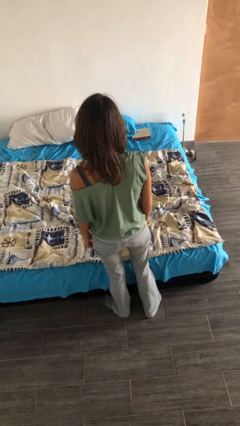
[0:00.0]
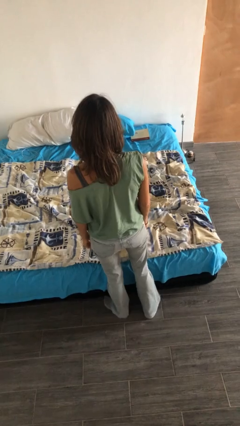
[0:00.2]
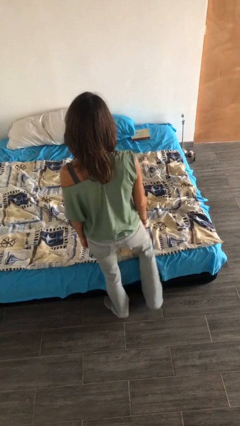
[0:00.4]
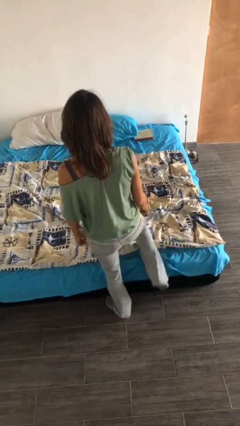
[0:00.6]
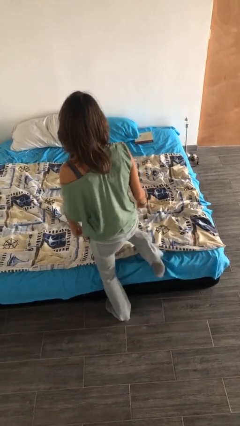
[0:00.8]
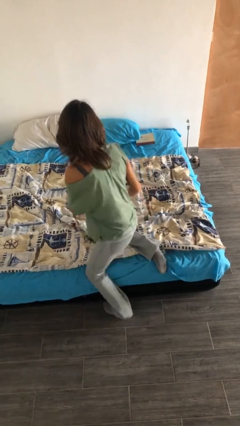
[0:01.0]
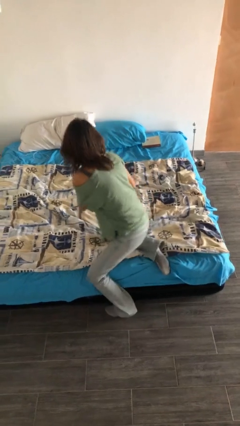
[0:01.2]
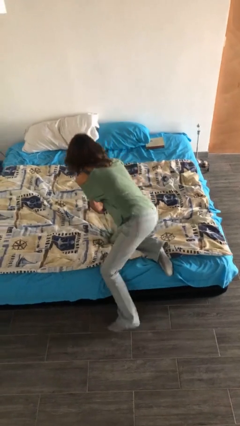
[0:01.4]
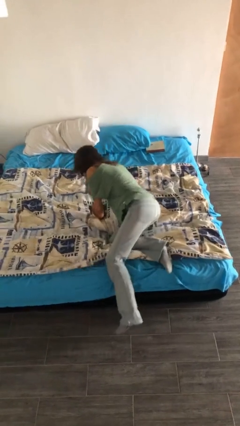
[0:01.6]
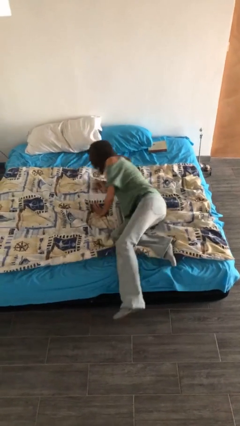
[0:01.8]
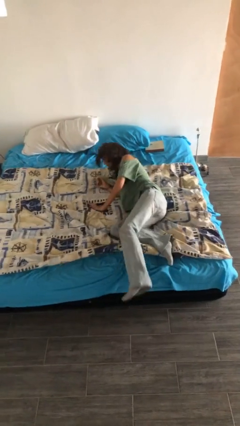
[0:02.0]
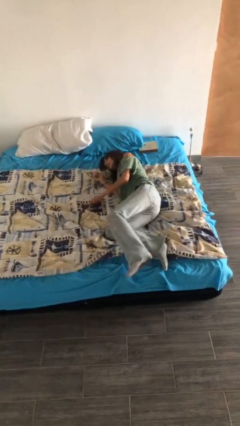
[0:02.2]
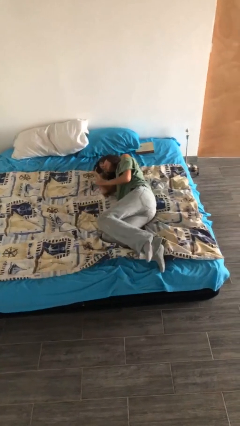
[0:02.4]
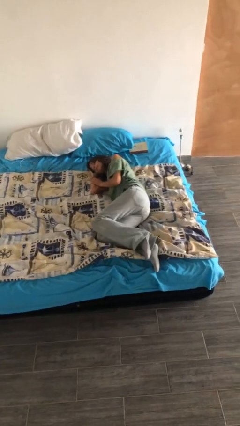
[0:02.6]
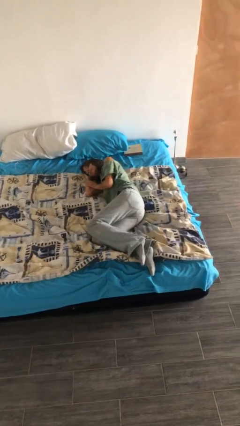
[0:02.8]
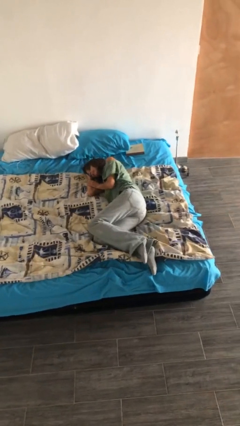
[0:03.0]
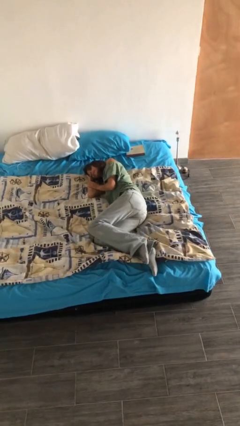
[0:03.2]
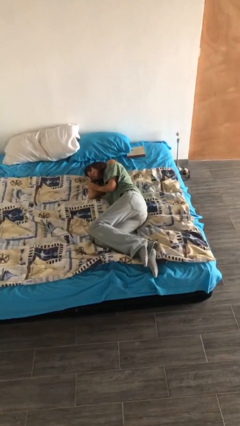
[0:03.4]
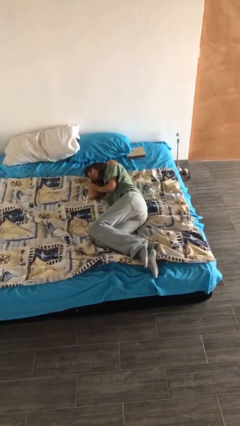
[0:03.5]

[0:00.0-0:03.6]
person lies down on bed

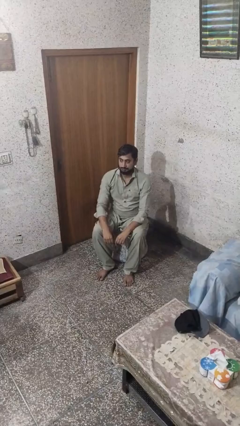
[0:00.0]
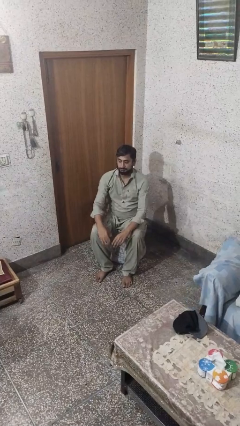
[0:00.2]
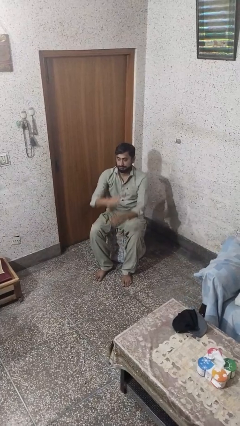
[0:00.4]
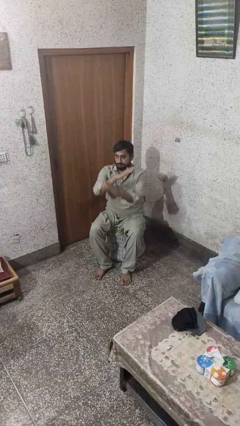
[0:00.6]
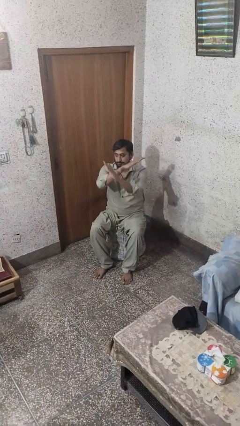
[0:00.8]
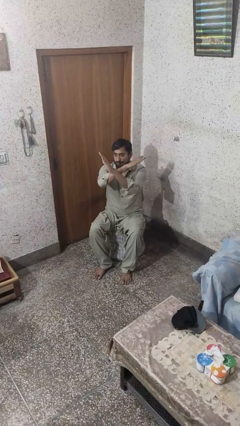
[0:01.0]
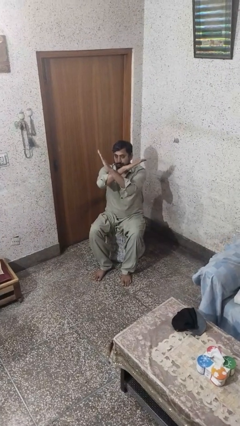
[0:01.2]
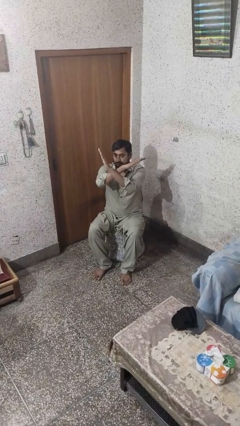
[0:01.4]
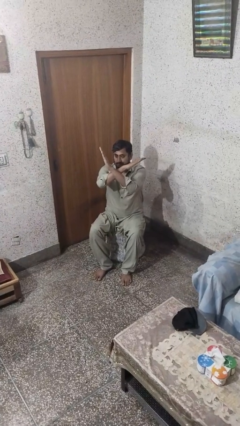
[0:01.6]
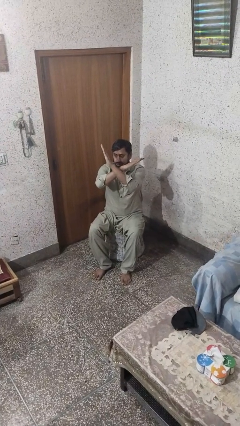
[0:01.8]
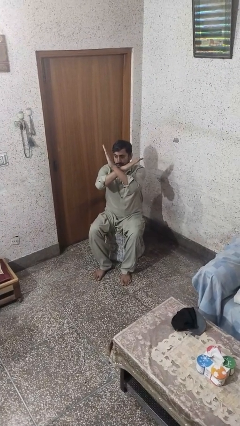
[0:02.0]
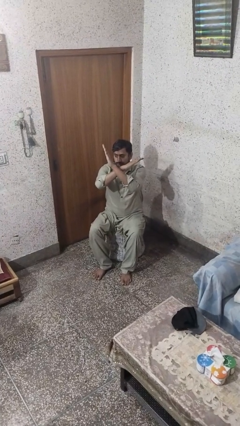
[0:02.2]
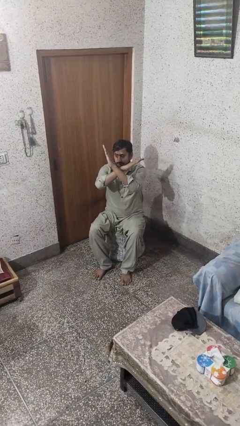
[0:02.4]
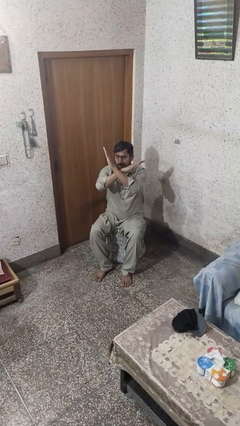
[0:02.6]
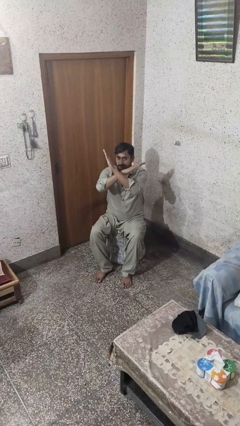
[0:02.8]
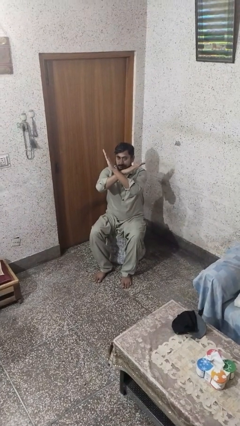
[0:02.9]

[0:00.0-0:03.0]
person gestures arms x

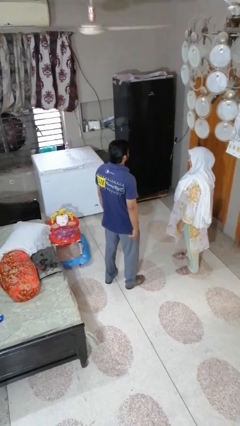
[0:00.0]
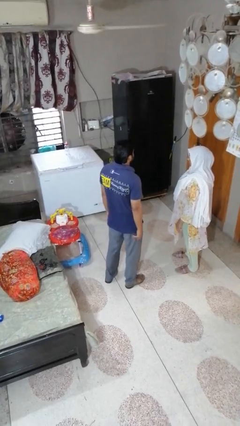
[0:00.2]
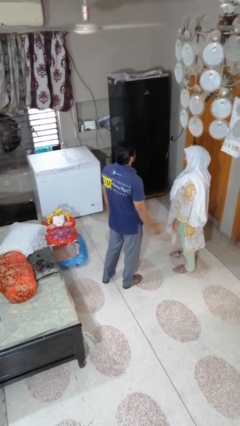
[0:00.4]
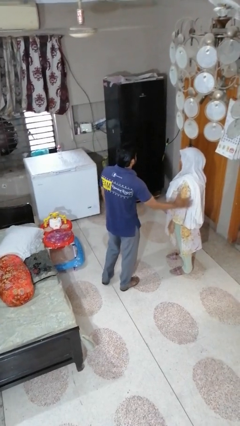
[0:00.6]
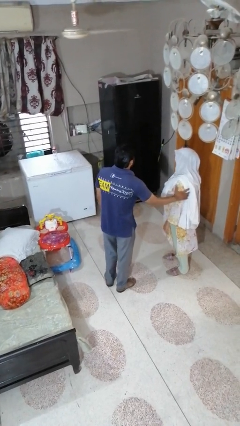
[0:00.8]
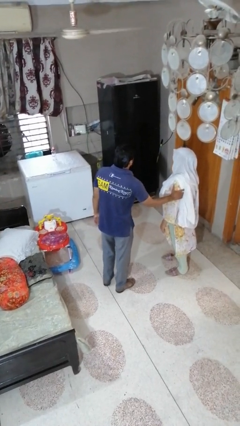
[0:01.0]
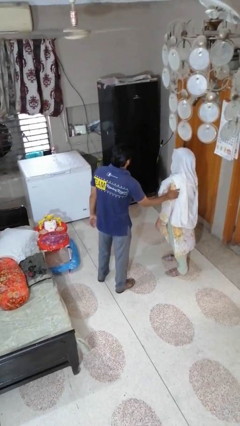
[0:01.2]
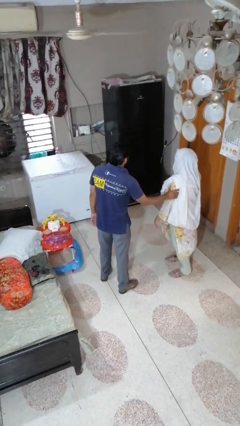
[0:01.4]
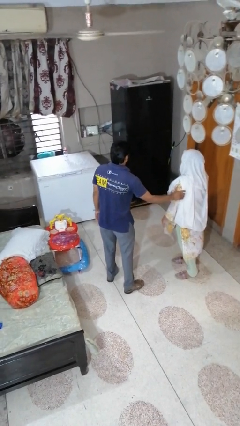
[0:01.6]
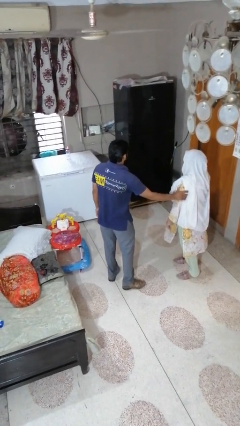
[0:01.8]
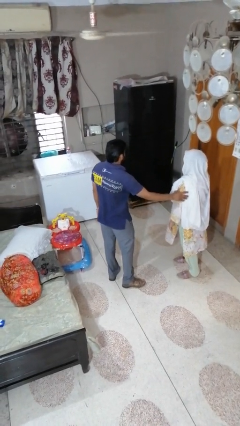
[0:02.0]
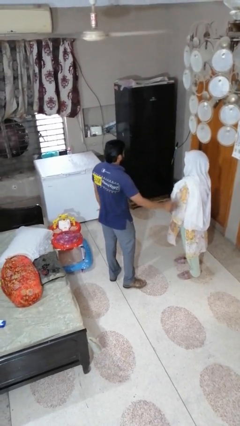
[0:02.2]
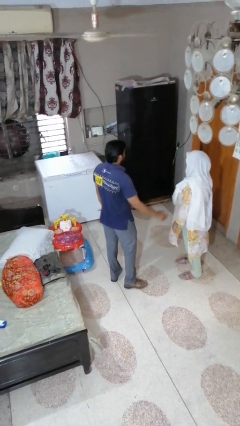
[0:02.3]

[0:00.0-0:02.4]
person grabs person by bicep

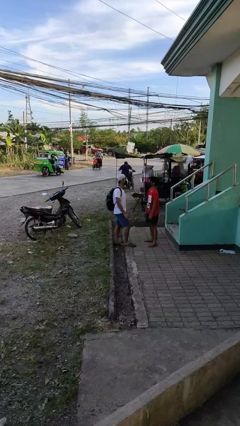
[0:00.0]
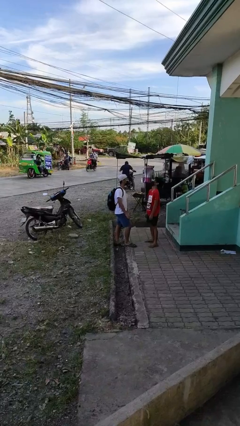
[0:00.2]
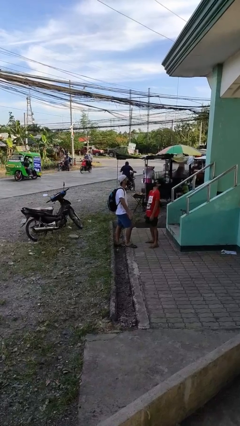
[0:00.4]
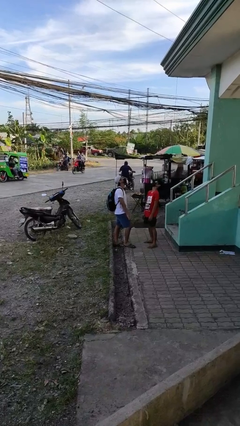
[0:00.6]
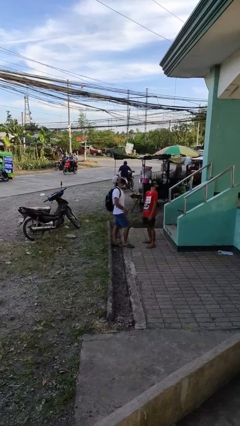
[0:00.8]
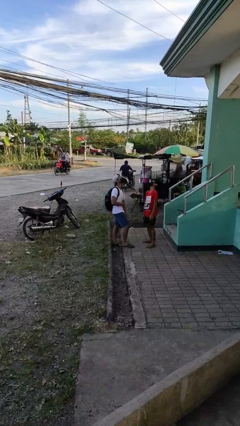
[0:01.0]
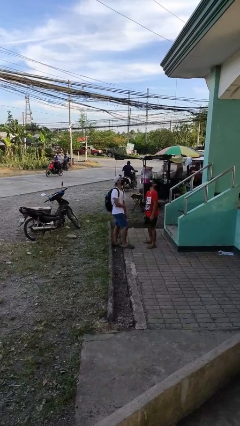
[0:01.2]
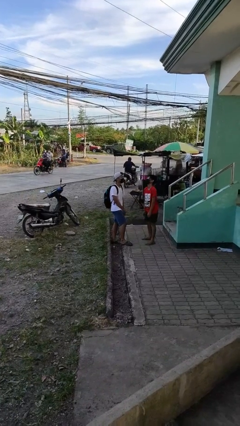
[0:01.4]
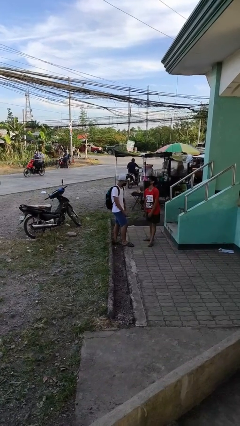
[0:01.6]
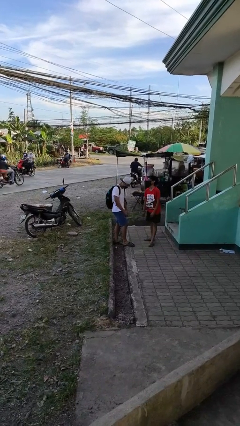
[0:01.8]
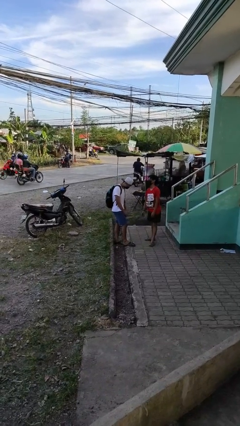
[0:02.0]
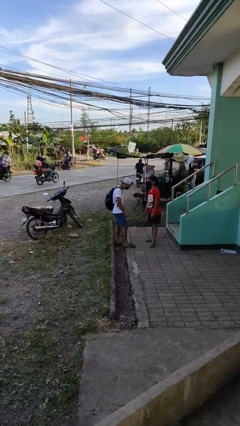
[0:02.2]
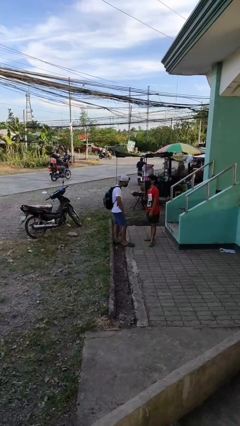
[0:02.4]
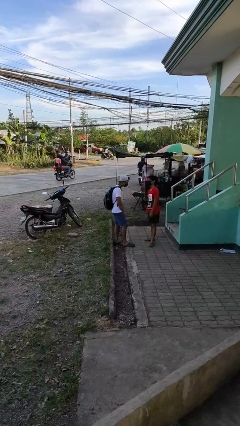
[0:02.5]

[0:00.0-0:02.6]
person laughs with person

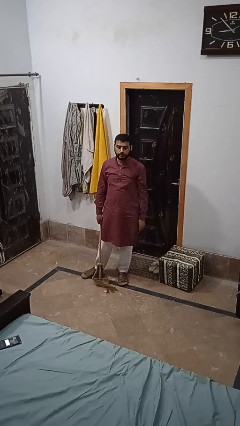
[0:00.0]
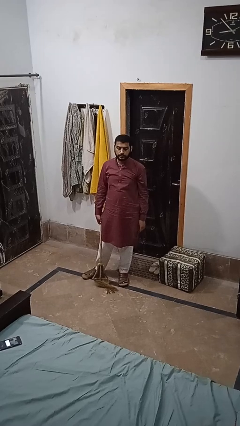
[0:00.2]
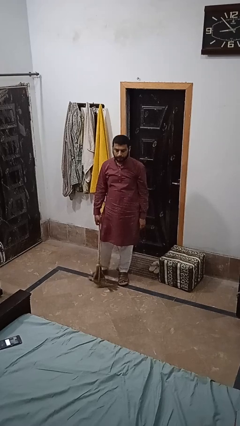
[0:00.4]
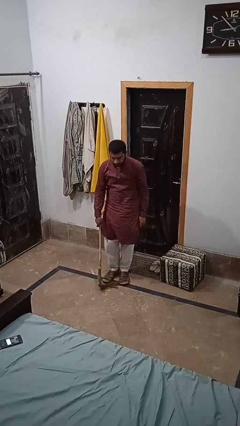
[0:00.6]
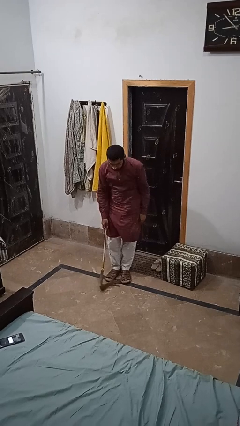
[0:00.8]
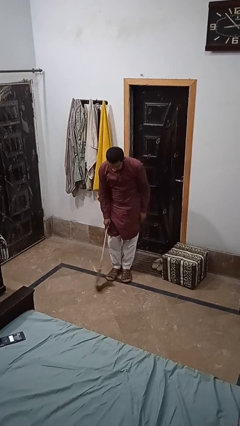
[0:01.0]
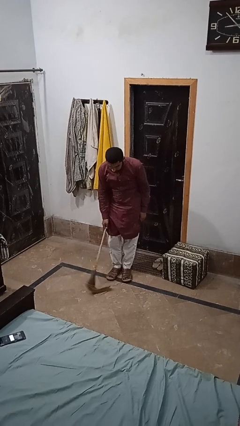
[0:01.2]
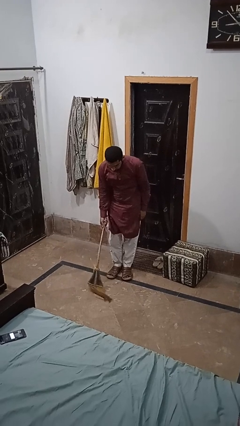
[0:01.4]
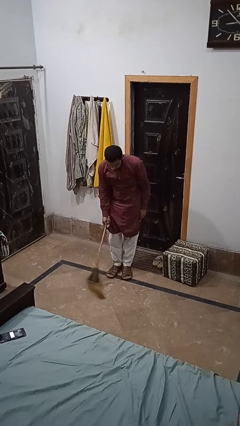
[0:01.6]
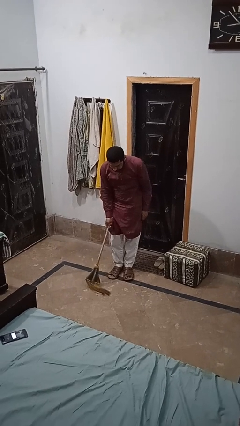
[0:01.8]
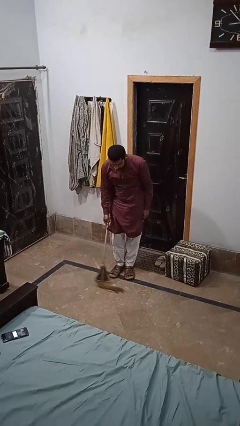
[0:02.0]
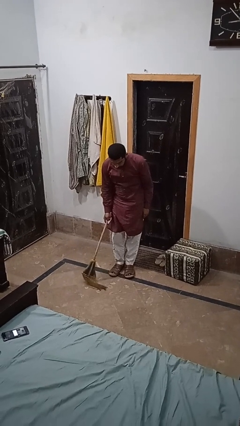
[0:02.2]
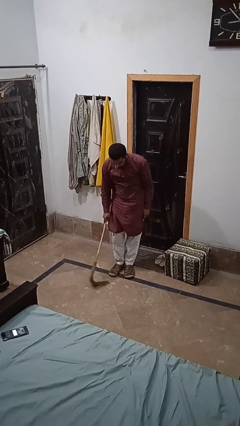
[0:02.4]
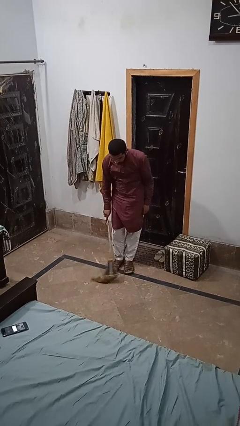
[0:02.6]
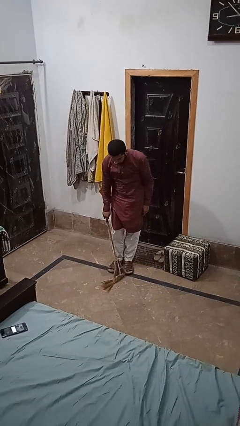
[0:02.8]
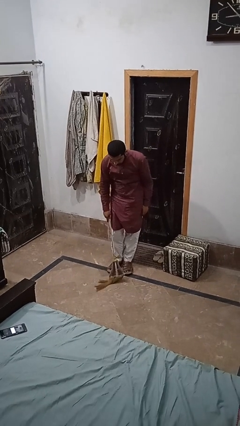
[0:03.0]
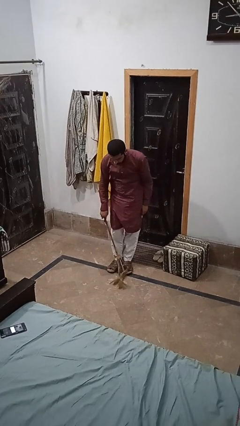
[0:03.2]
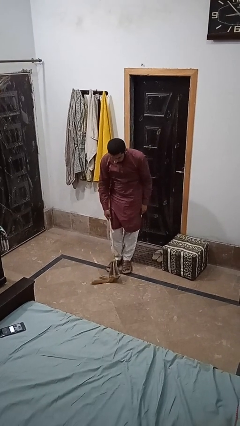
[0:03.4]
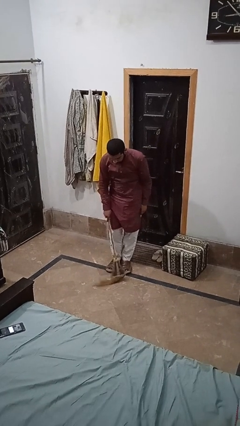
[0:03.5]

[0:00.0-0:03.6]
person mops

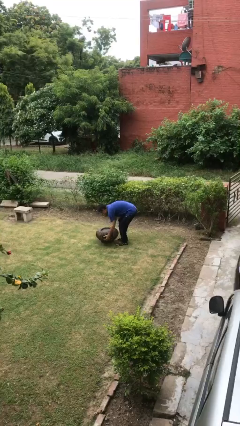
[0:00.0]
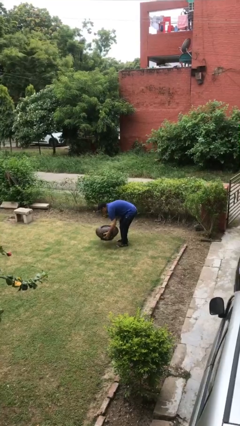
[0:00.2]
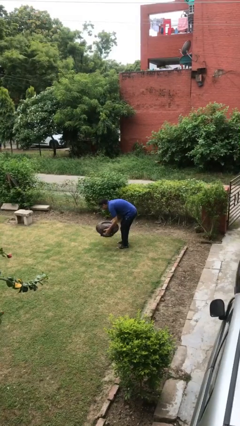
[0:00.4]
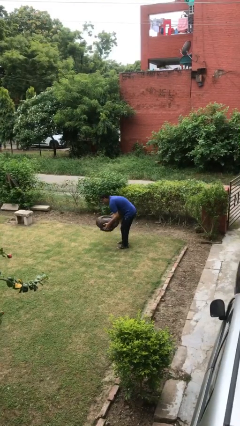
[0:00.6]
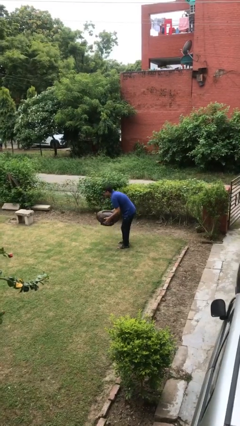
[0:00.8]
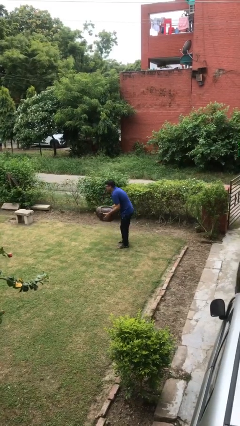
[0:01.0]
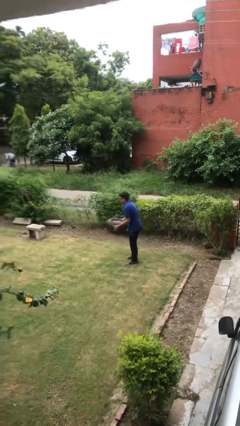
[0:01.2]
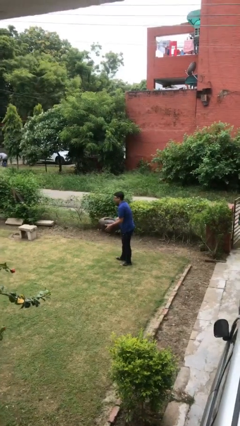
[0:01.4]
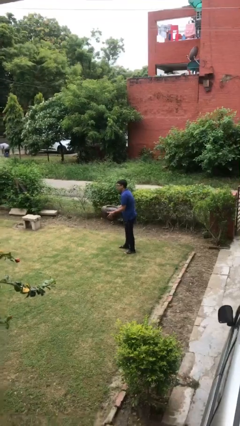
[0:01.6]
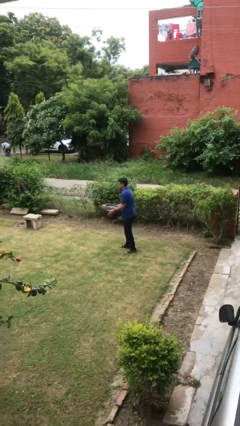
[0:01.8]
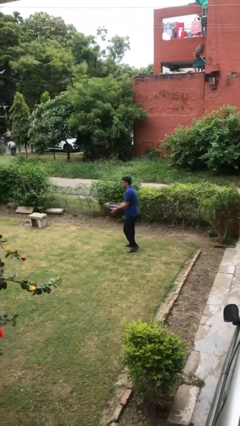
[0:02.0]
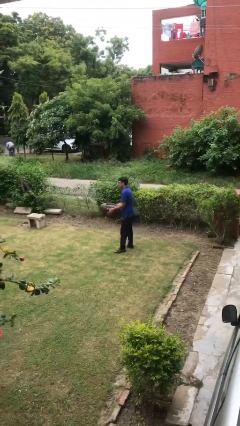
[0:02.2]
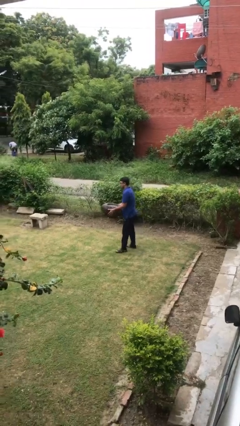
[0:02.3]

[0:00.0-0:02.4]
person picks up object from floor
